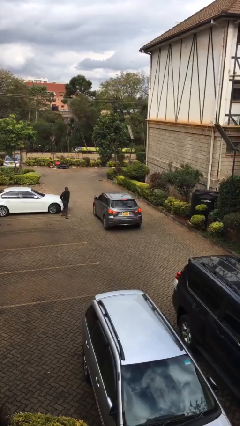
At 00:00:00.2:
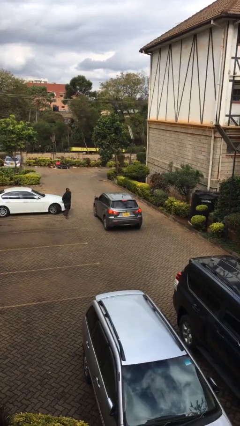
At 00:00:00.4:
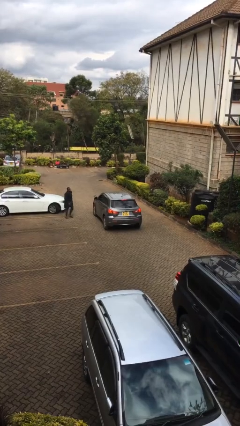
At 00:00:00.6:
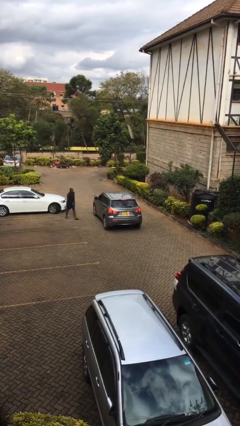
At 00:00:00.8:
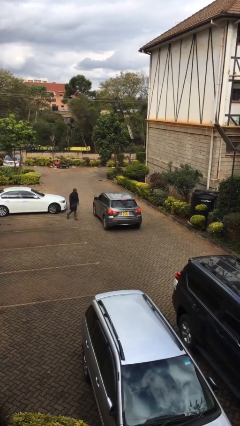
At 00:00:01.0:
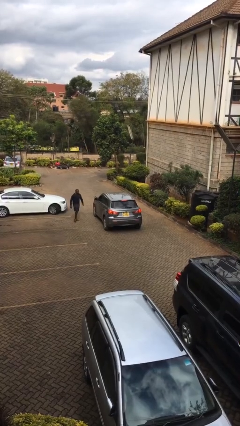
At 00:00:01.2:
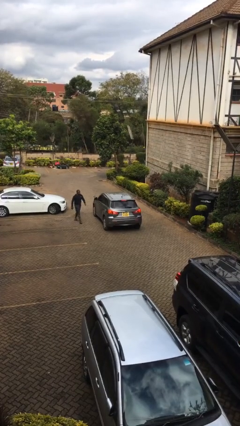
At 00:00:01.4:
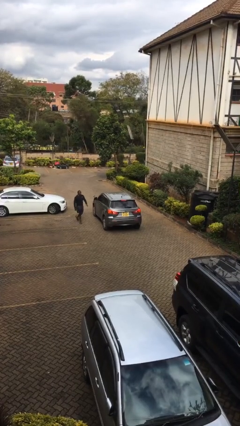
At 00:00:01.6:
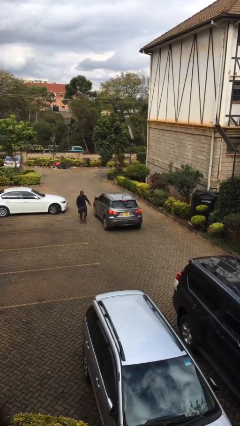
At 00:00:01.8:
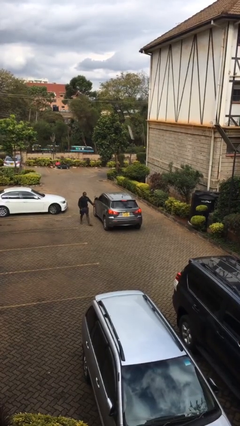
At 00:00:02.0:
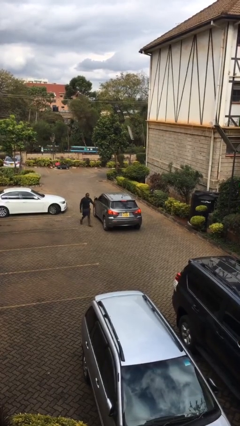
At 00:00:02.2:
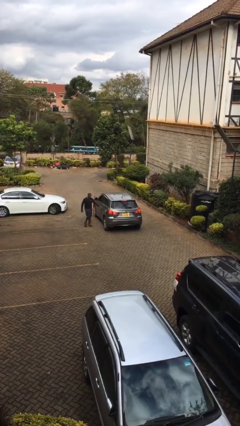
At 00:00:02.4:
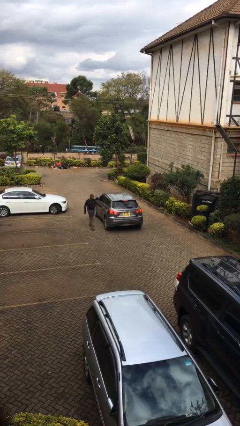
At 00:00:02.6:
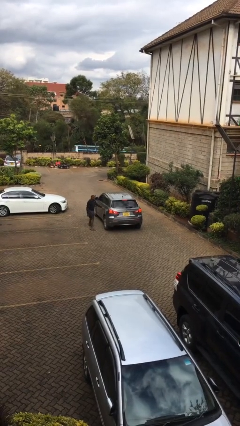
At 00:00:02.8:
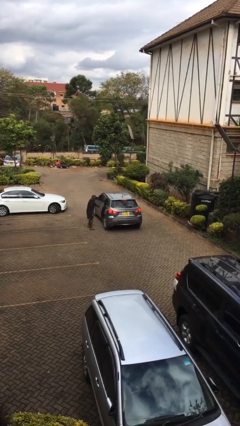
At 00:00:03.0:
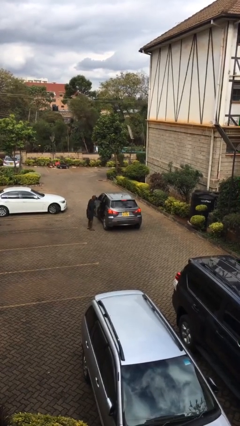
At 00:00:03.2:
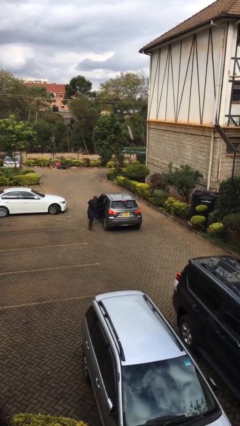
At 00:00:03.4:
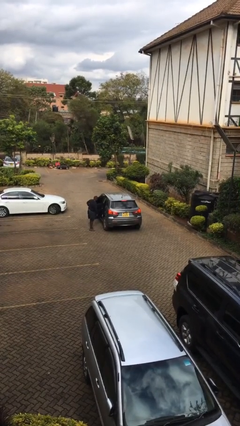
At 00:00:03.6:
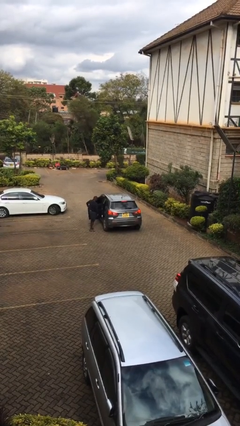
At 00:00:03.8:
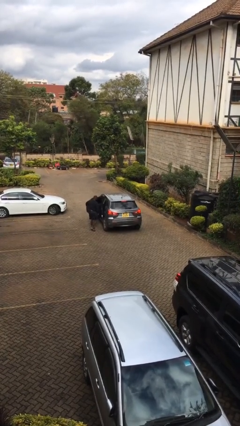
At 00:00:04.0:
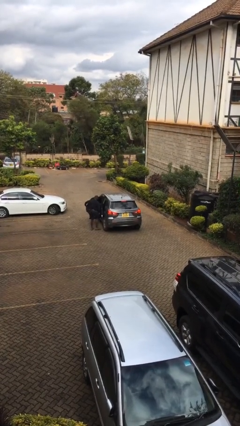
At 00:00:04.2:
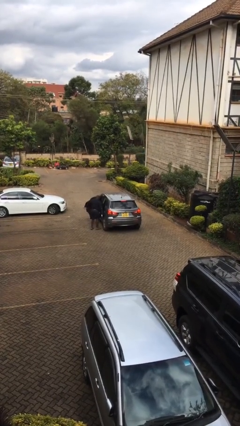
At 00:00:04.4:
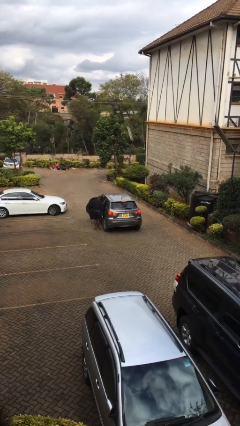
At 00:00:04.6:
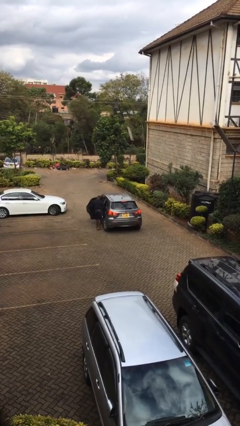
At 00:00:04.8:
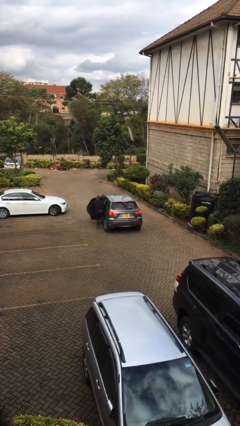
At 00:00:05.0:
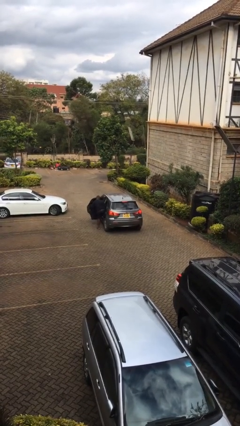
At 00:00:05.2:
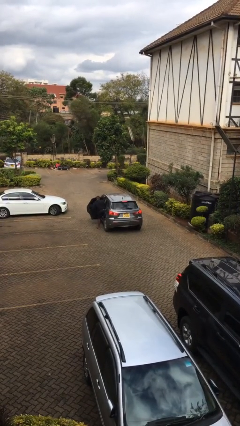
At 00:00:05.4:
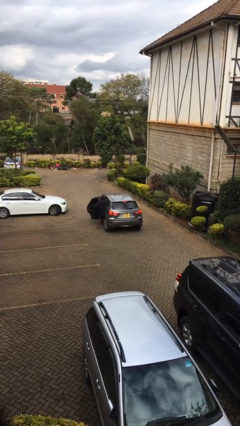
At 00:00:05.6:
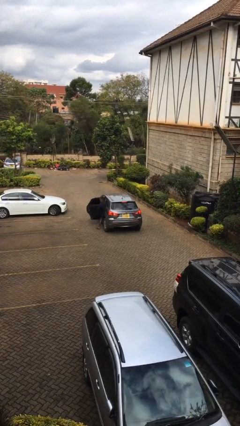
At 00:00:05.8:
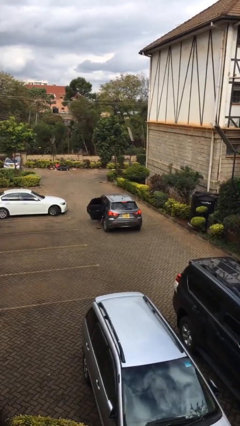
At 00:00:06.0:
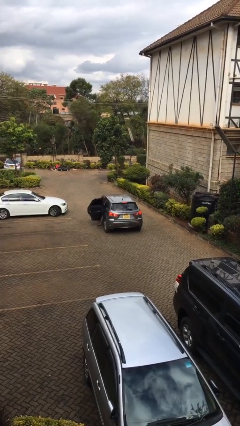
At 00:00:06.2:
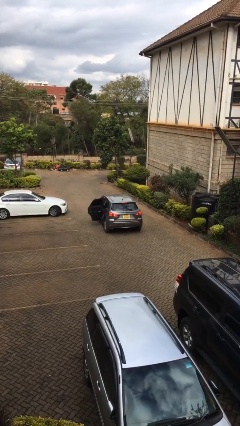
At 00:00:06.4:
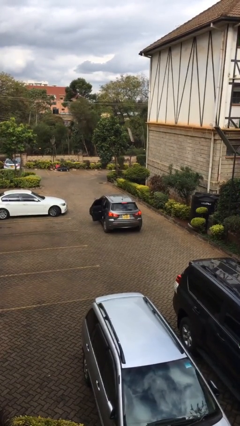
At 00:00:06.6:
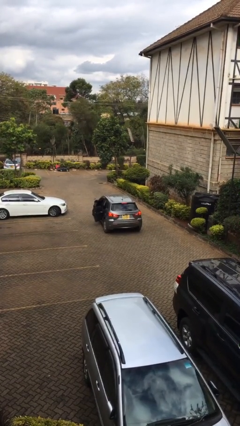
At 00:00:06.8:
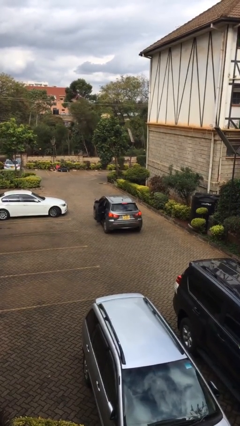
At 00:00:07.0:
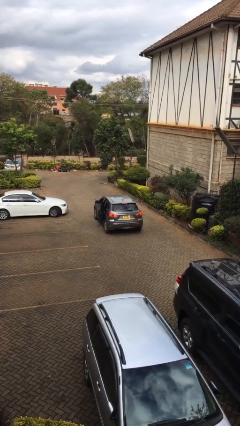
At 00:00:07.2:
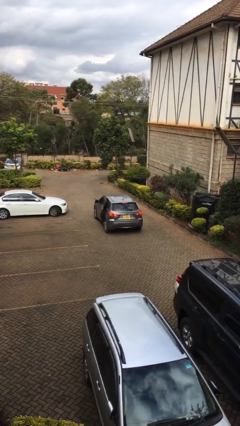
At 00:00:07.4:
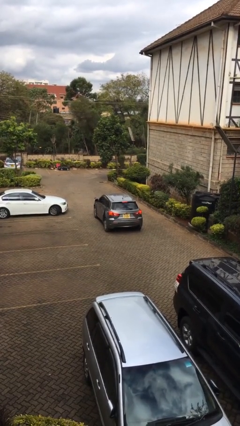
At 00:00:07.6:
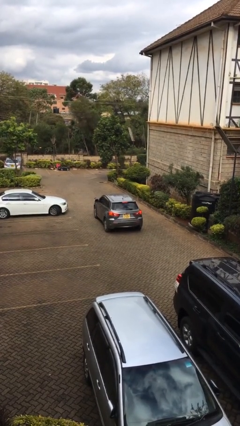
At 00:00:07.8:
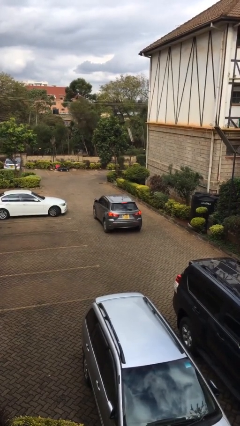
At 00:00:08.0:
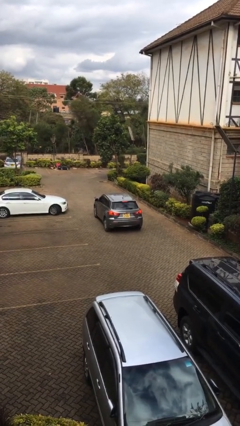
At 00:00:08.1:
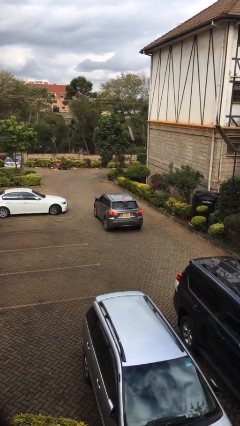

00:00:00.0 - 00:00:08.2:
car picks up person

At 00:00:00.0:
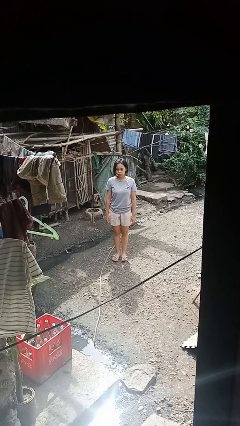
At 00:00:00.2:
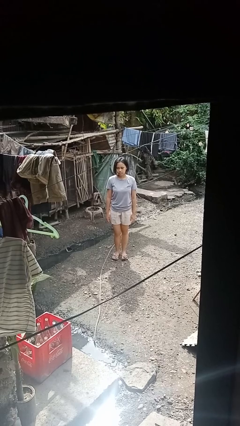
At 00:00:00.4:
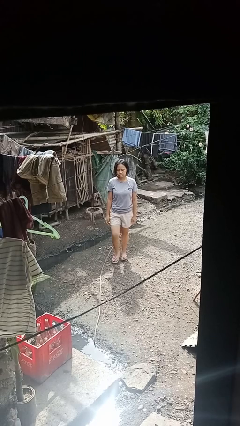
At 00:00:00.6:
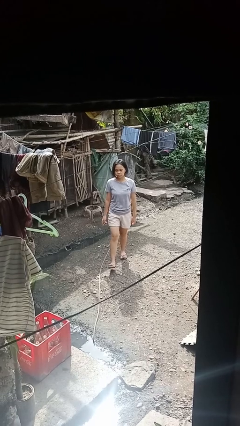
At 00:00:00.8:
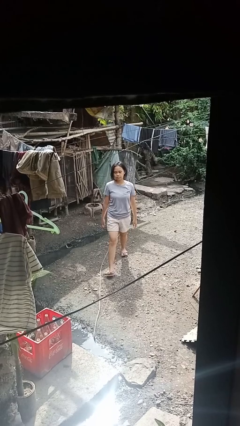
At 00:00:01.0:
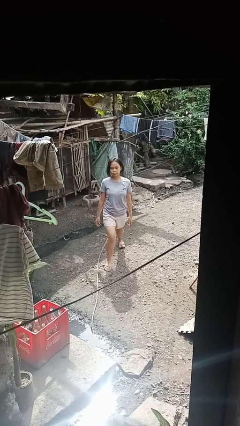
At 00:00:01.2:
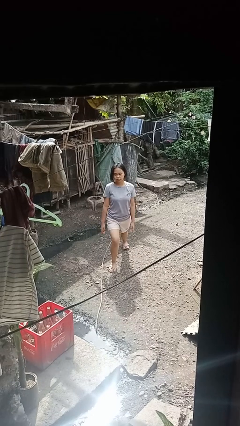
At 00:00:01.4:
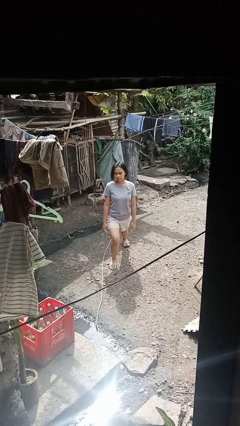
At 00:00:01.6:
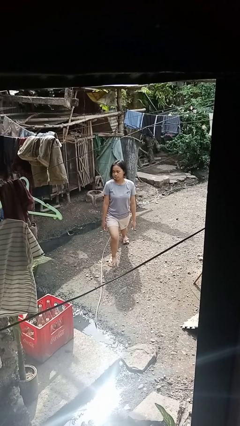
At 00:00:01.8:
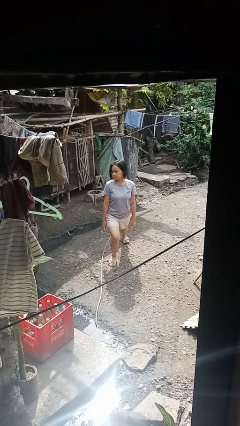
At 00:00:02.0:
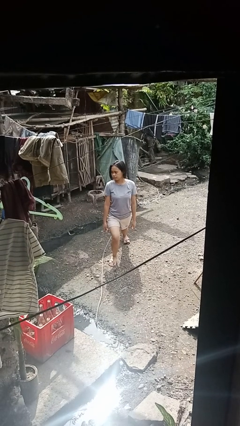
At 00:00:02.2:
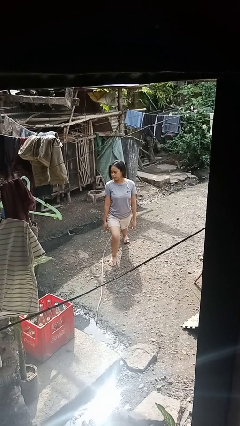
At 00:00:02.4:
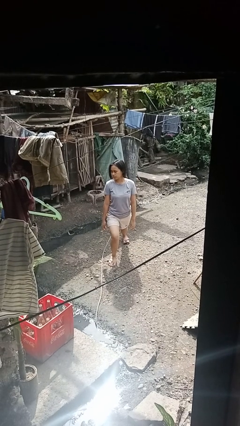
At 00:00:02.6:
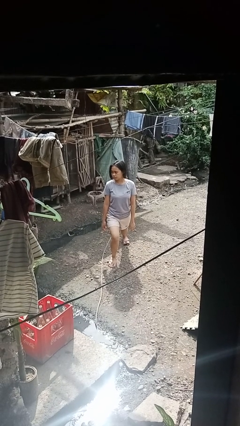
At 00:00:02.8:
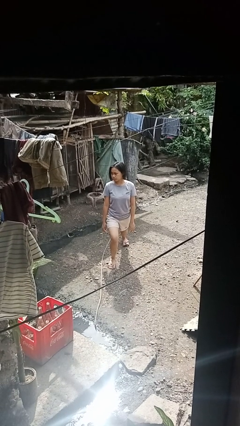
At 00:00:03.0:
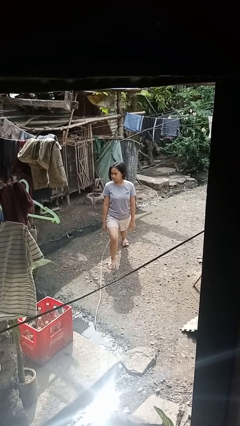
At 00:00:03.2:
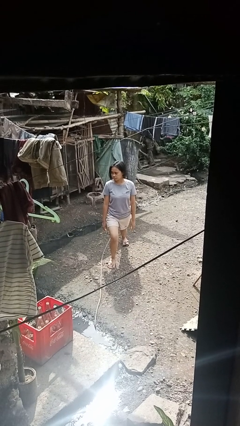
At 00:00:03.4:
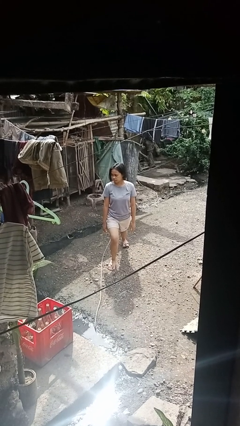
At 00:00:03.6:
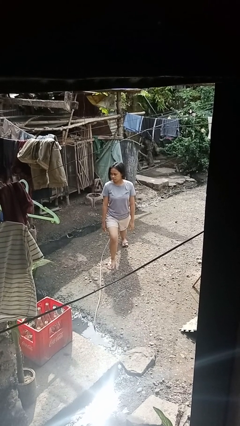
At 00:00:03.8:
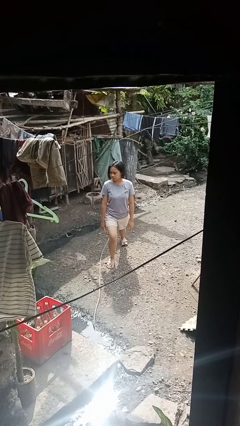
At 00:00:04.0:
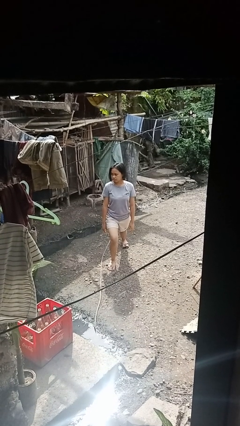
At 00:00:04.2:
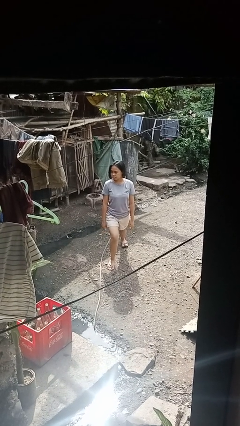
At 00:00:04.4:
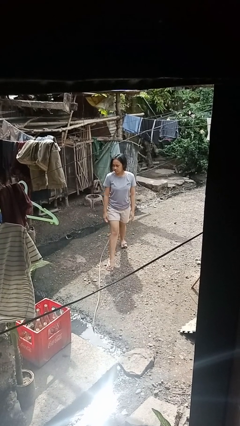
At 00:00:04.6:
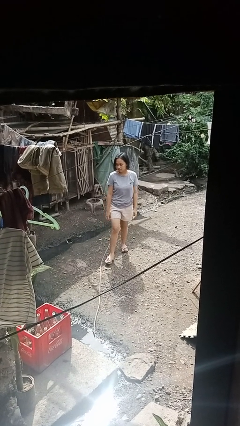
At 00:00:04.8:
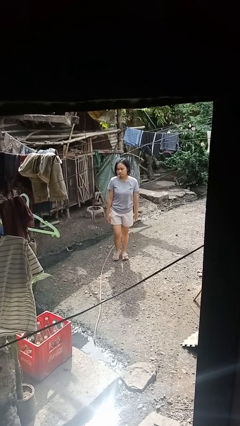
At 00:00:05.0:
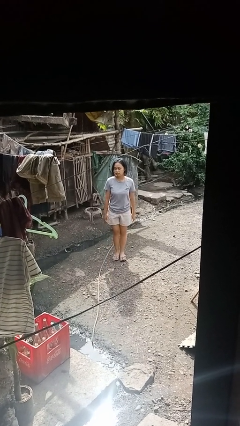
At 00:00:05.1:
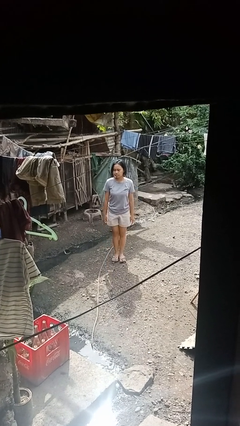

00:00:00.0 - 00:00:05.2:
person exercises with lunges

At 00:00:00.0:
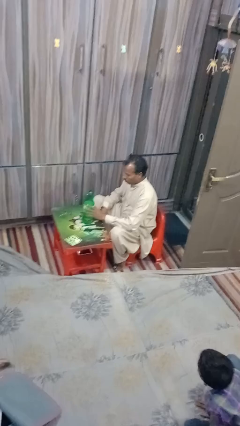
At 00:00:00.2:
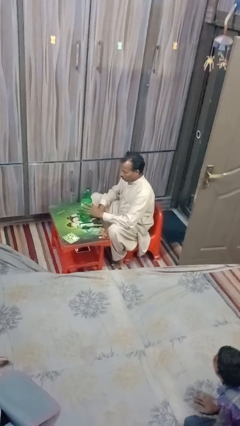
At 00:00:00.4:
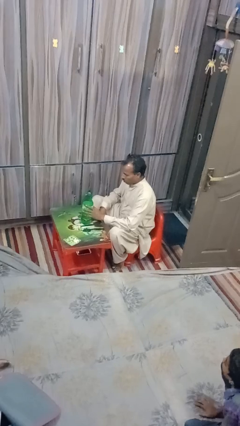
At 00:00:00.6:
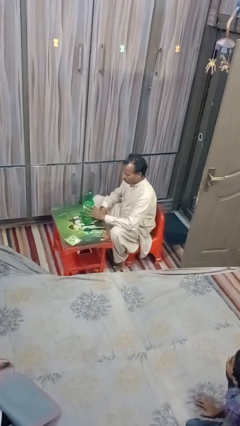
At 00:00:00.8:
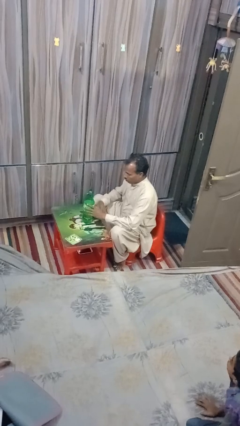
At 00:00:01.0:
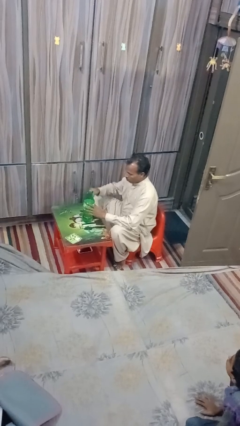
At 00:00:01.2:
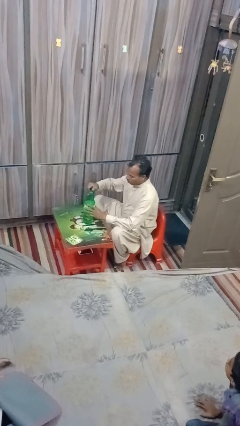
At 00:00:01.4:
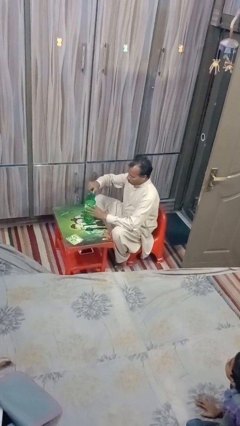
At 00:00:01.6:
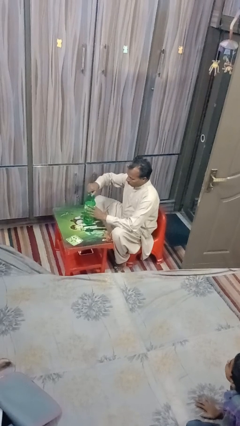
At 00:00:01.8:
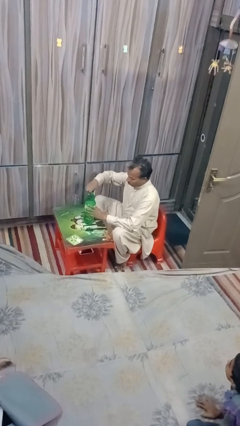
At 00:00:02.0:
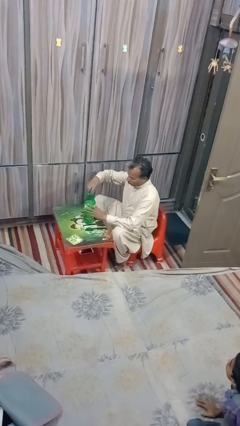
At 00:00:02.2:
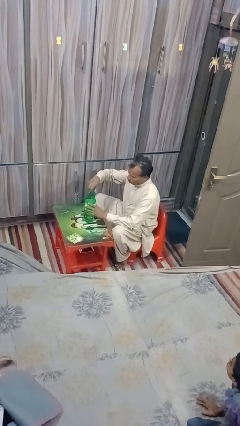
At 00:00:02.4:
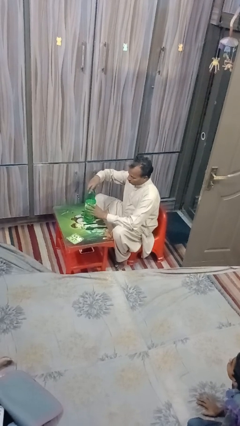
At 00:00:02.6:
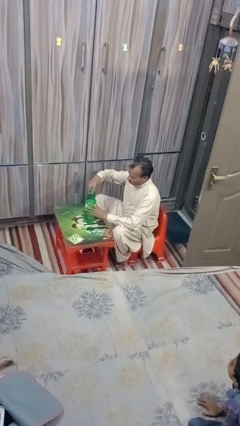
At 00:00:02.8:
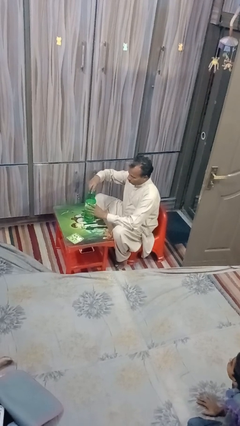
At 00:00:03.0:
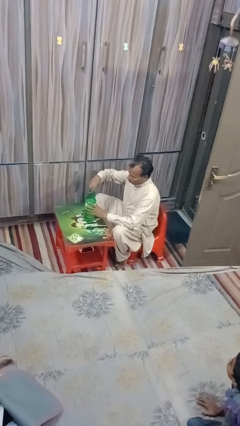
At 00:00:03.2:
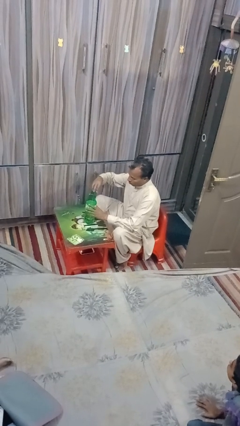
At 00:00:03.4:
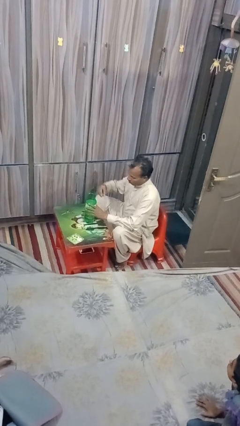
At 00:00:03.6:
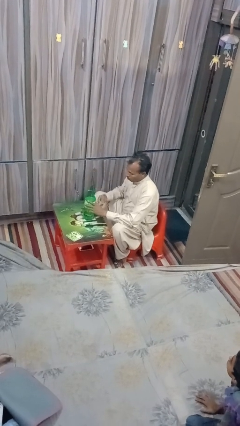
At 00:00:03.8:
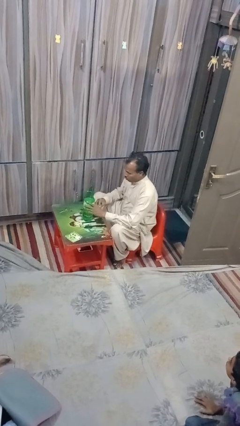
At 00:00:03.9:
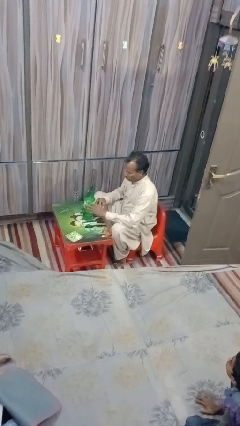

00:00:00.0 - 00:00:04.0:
person unscrews lid from bottle

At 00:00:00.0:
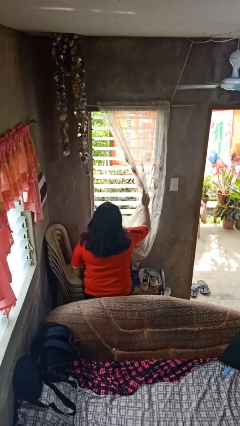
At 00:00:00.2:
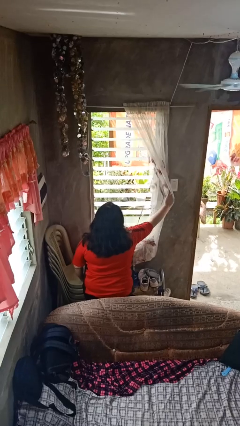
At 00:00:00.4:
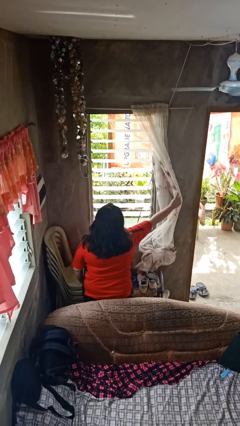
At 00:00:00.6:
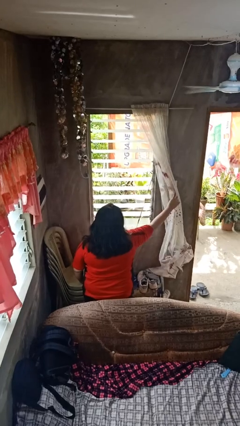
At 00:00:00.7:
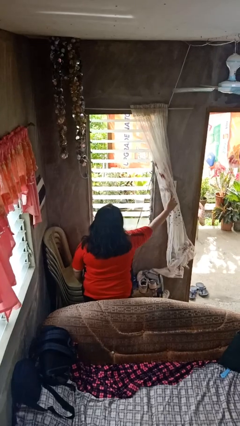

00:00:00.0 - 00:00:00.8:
person opens curtains
